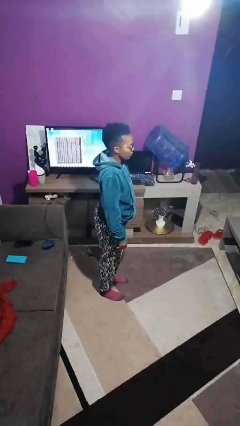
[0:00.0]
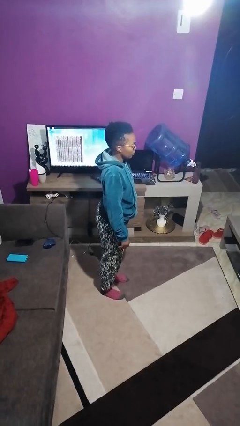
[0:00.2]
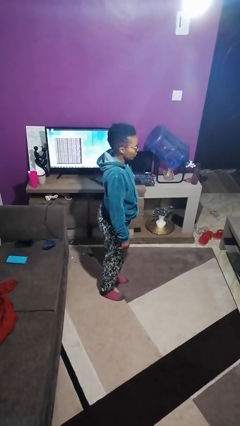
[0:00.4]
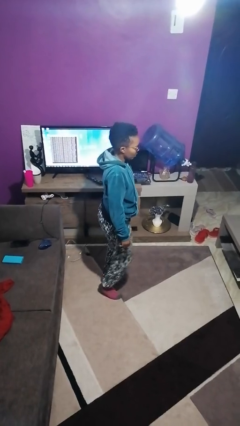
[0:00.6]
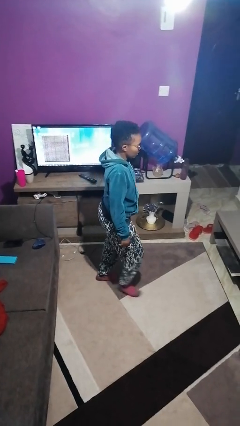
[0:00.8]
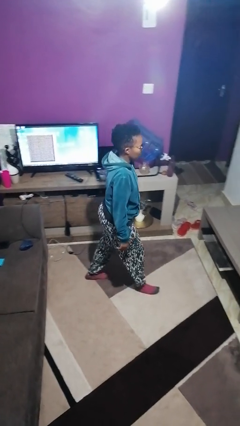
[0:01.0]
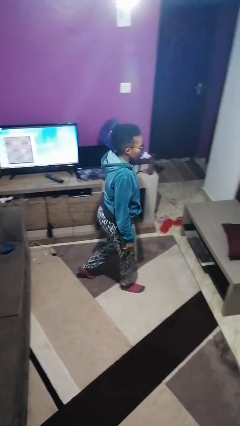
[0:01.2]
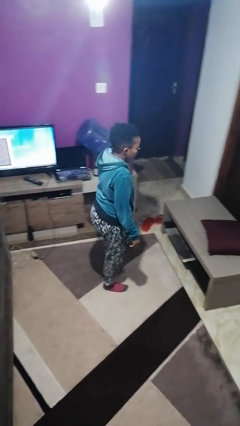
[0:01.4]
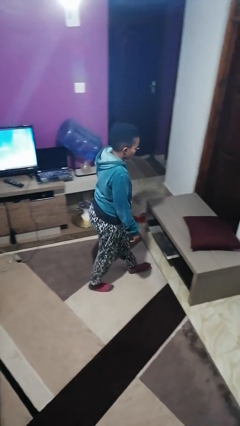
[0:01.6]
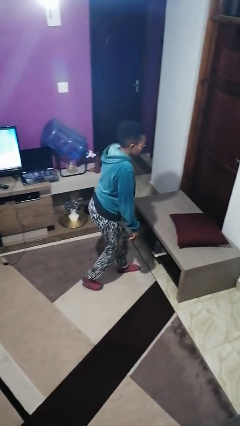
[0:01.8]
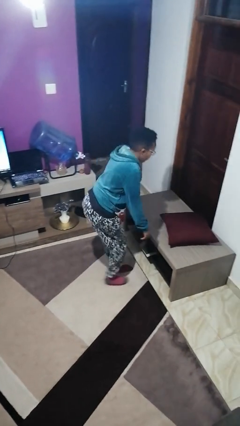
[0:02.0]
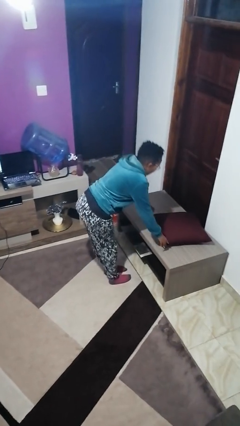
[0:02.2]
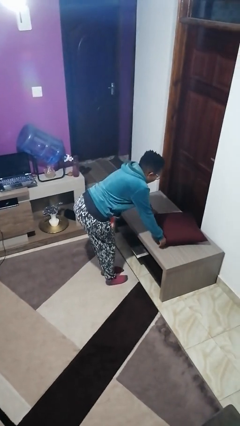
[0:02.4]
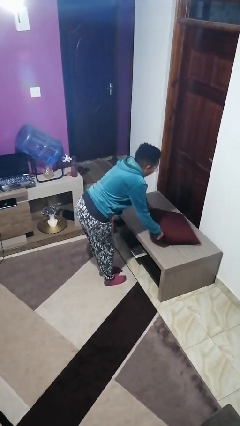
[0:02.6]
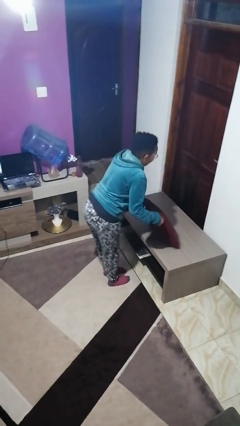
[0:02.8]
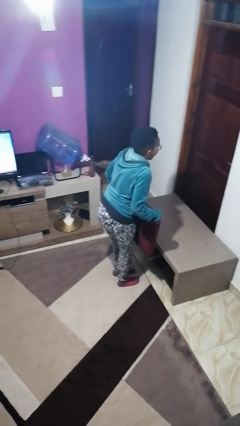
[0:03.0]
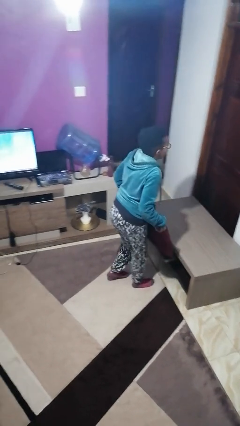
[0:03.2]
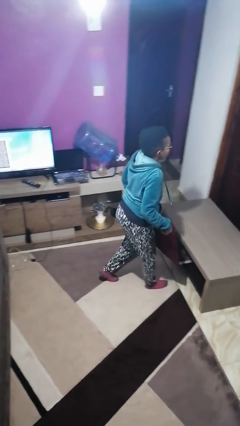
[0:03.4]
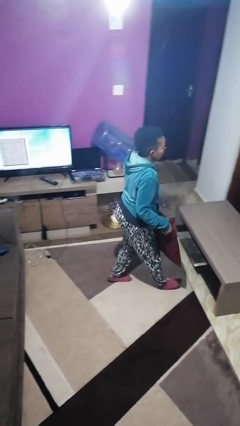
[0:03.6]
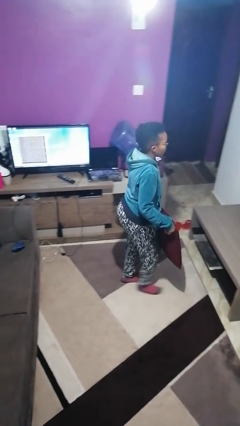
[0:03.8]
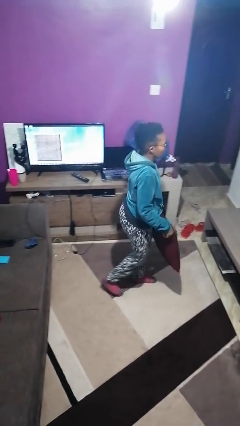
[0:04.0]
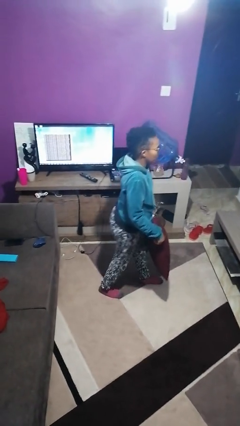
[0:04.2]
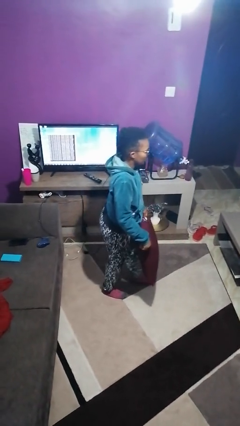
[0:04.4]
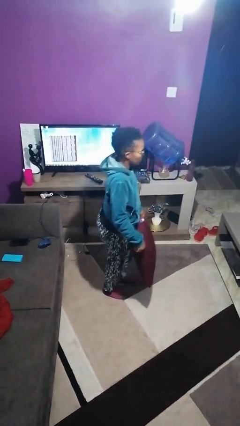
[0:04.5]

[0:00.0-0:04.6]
person picks up object from table

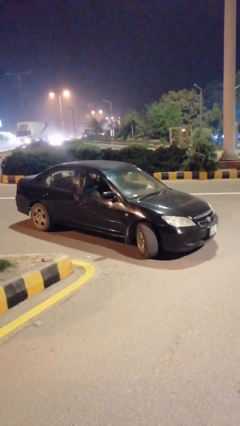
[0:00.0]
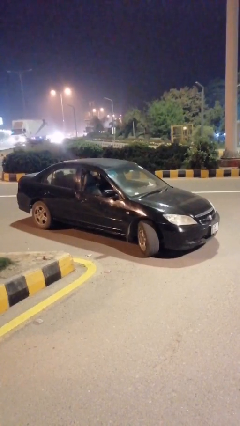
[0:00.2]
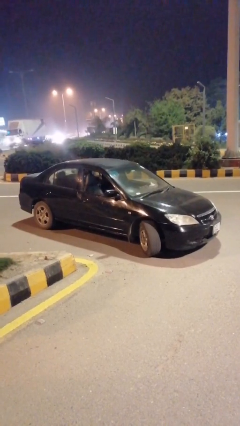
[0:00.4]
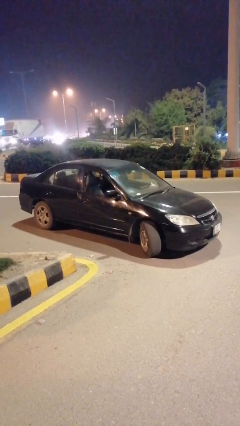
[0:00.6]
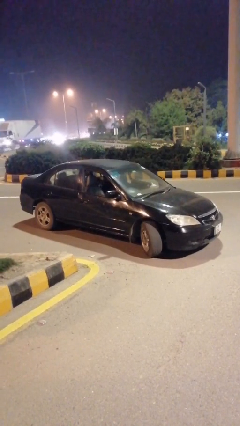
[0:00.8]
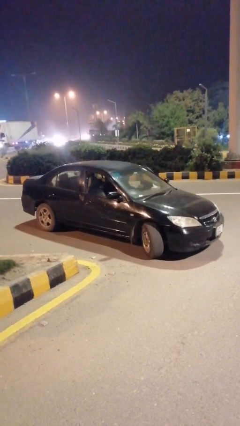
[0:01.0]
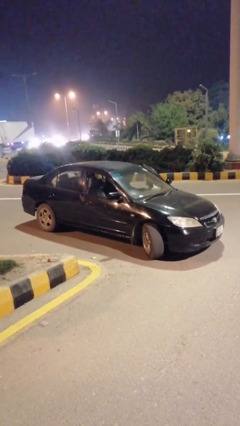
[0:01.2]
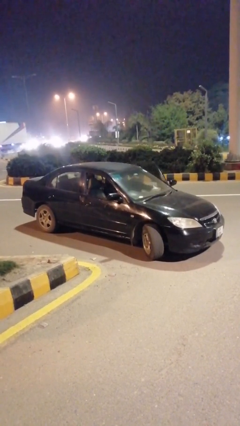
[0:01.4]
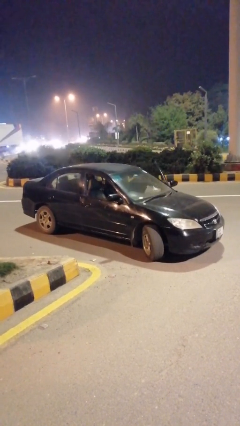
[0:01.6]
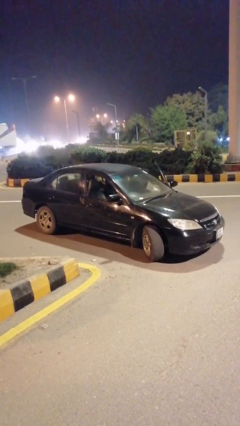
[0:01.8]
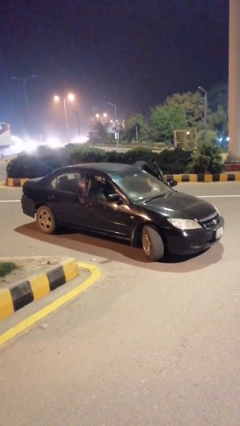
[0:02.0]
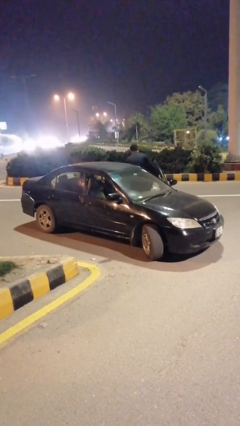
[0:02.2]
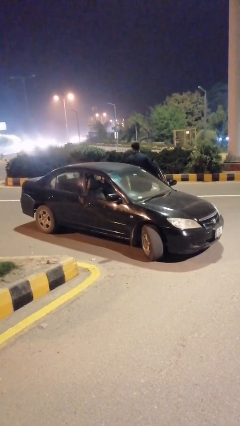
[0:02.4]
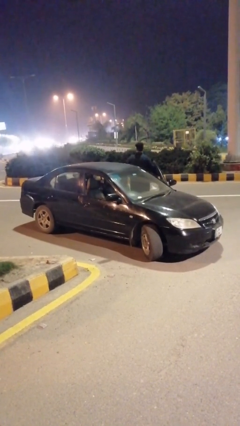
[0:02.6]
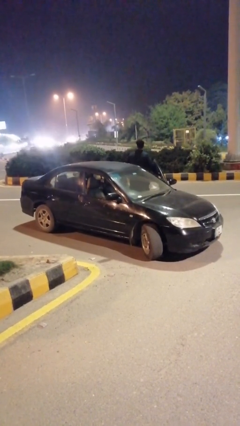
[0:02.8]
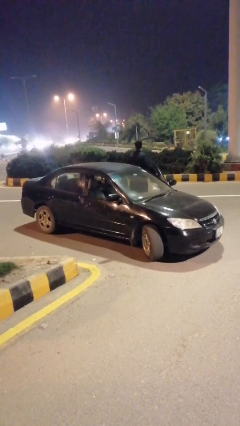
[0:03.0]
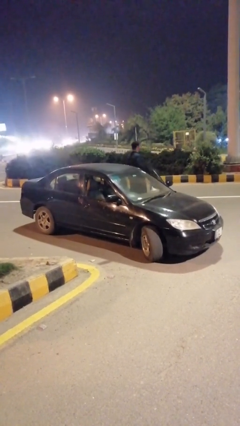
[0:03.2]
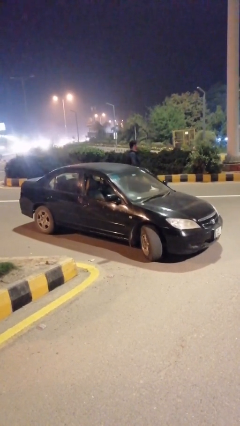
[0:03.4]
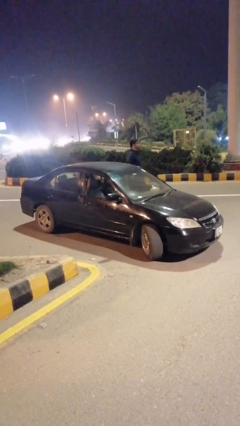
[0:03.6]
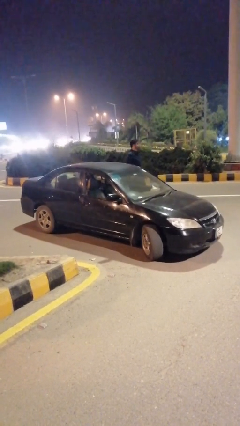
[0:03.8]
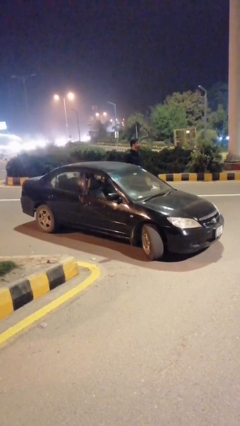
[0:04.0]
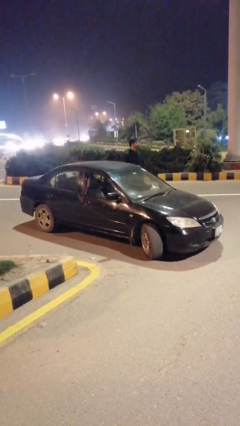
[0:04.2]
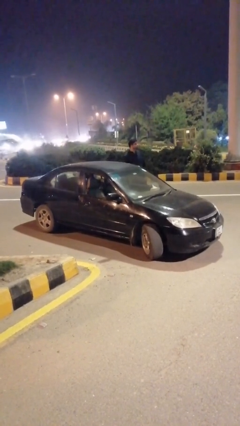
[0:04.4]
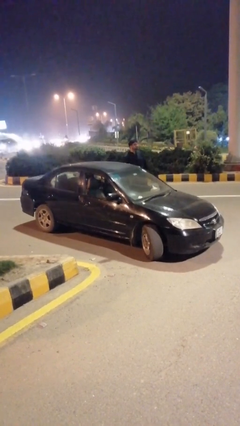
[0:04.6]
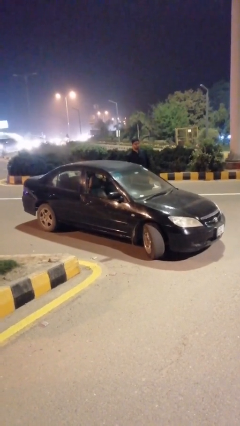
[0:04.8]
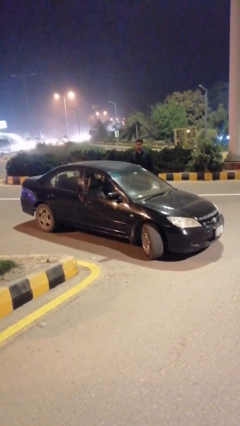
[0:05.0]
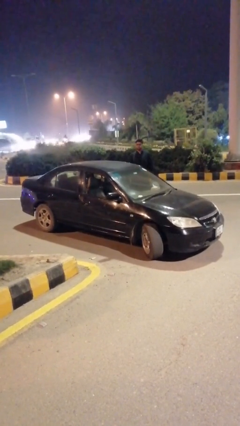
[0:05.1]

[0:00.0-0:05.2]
car drops off person

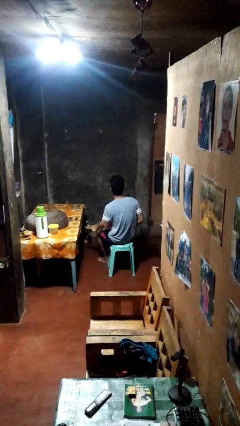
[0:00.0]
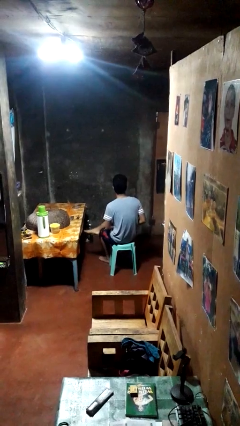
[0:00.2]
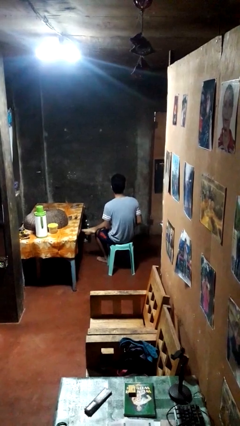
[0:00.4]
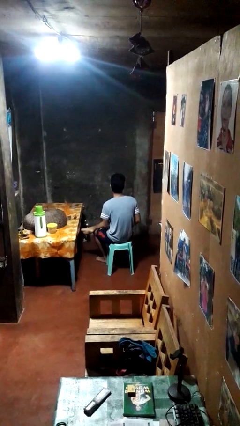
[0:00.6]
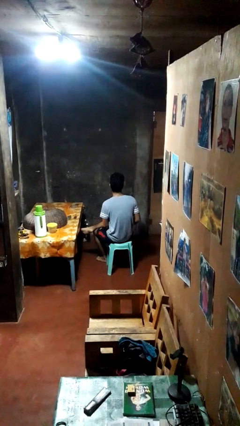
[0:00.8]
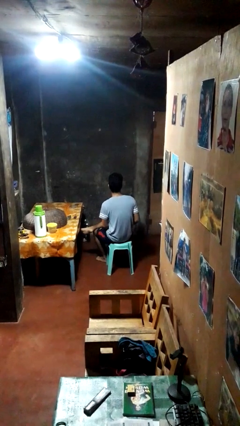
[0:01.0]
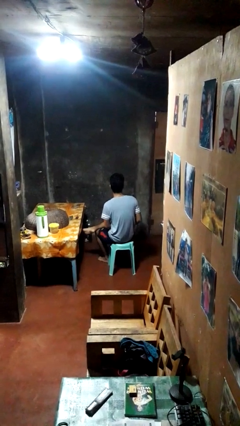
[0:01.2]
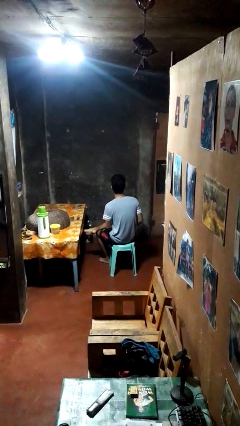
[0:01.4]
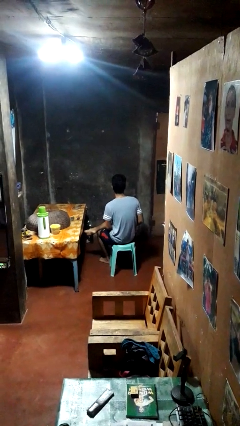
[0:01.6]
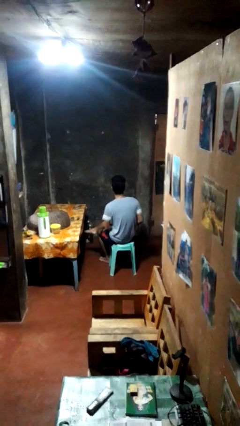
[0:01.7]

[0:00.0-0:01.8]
person crosses legs

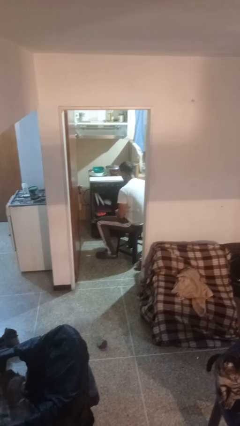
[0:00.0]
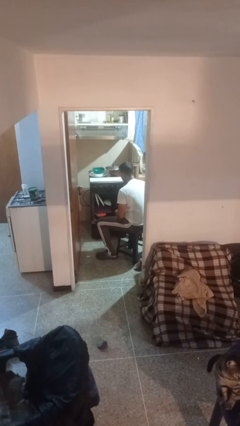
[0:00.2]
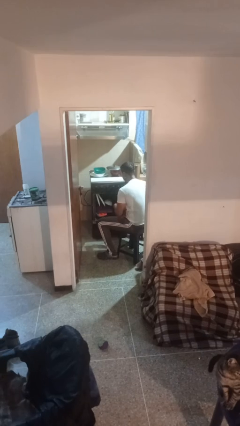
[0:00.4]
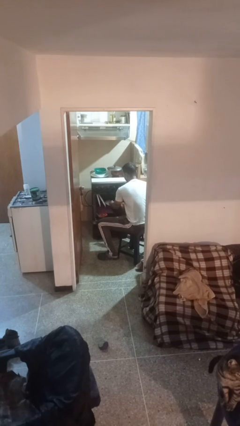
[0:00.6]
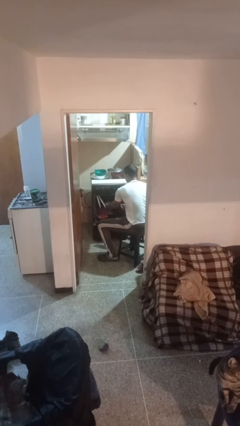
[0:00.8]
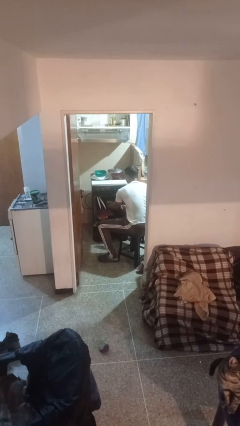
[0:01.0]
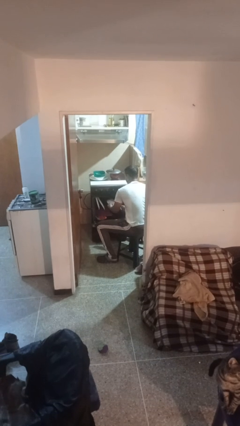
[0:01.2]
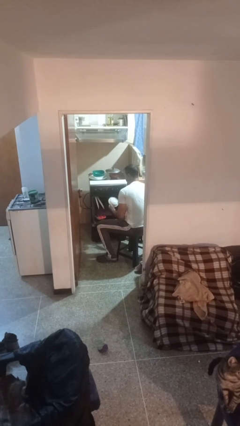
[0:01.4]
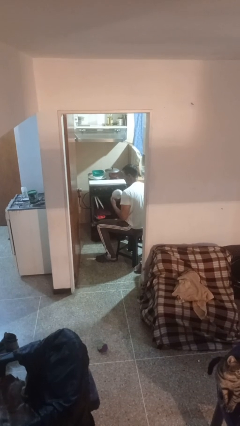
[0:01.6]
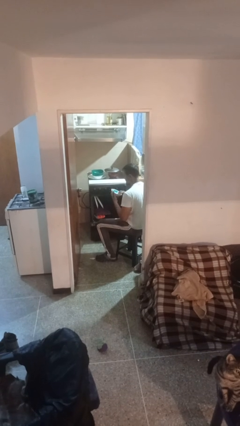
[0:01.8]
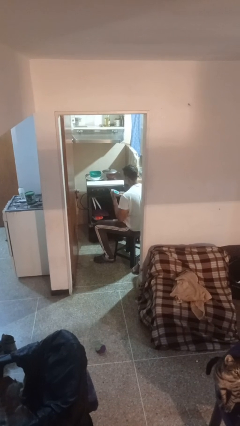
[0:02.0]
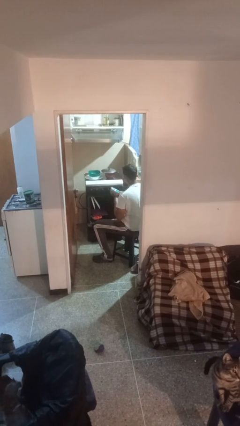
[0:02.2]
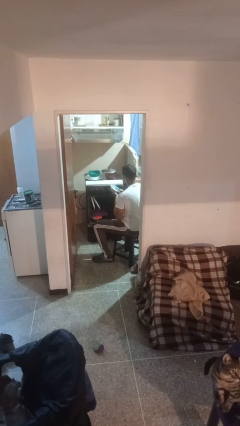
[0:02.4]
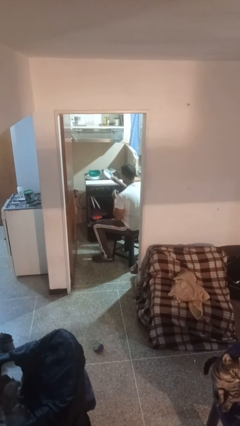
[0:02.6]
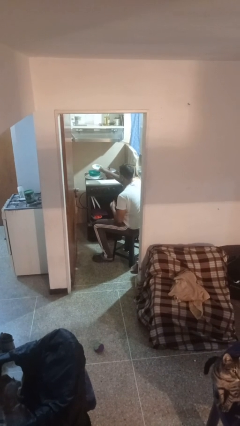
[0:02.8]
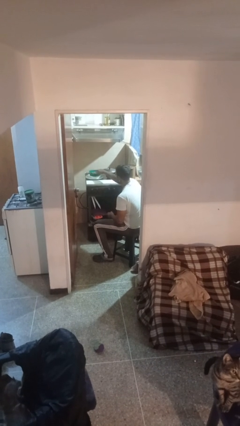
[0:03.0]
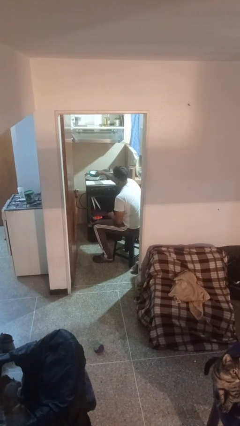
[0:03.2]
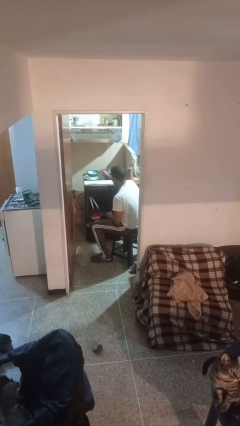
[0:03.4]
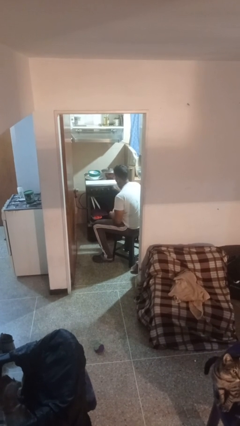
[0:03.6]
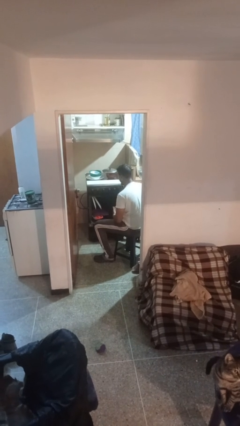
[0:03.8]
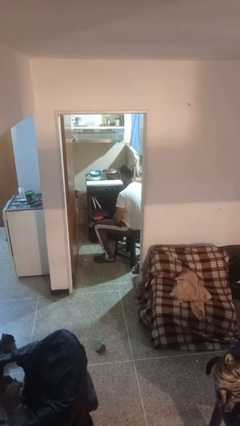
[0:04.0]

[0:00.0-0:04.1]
person unloads dishwasher

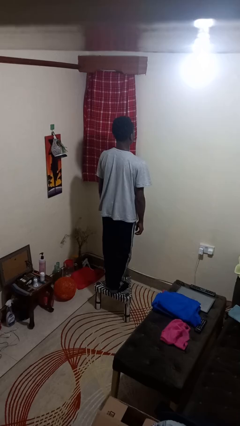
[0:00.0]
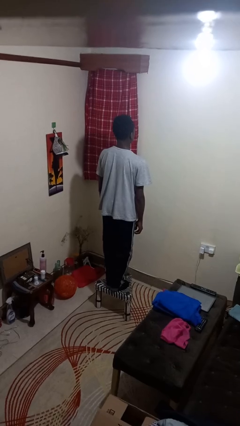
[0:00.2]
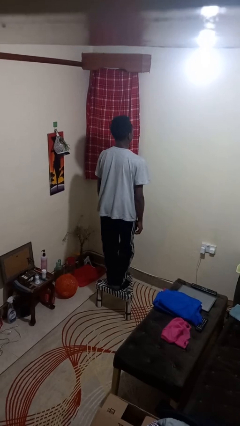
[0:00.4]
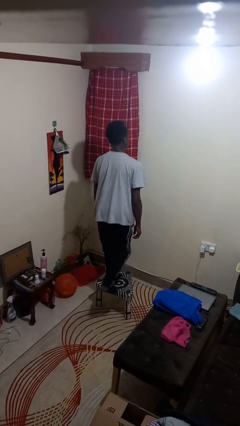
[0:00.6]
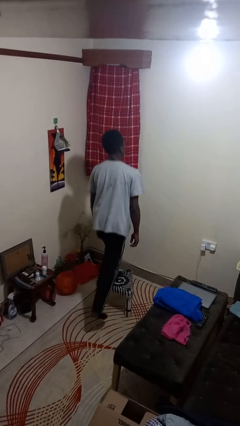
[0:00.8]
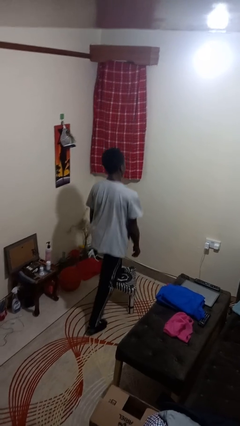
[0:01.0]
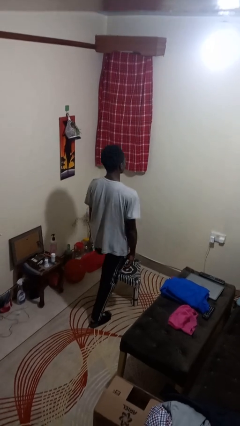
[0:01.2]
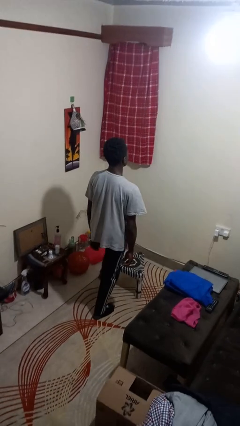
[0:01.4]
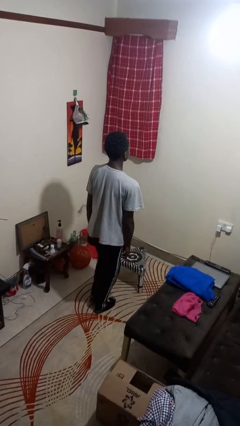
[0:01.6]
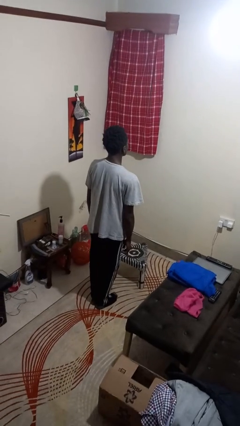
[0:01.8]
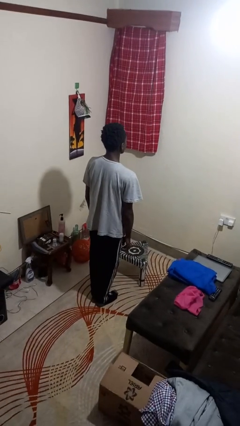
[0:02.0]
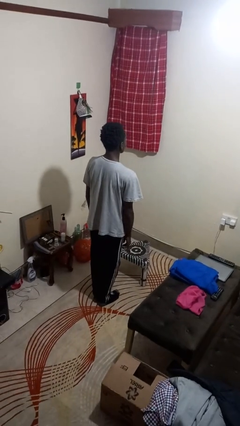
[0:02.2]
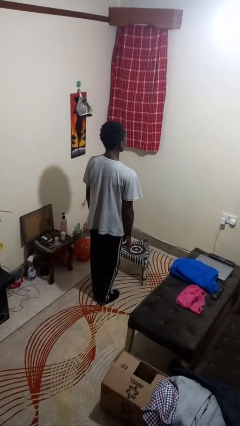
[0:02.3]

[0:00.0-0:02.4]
person climbs off chair
